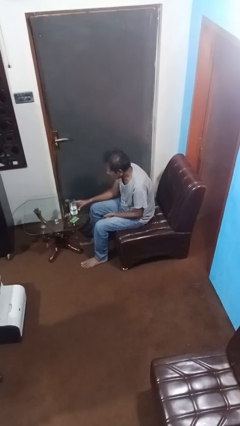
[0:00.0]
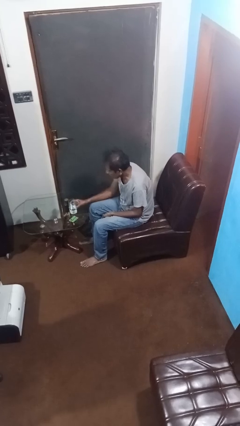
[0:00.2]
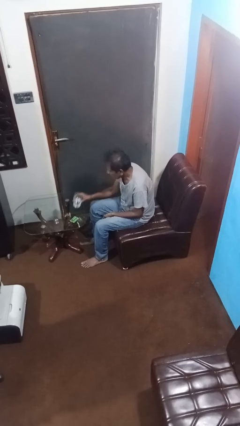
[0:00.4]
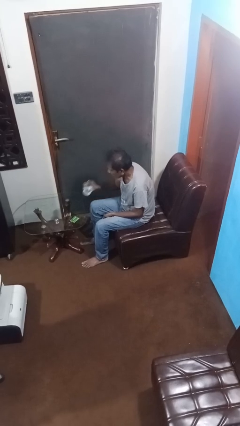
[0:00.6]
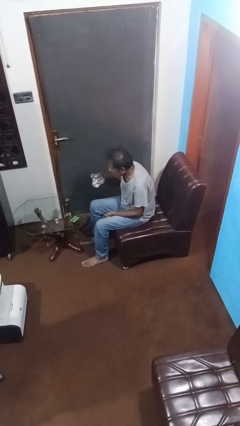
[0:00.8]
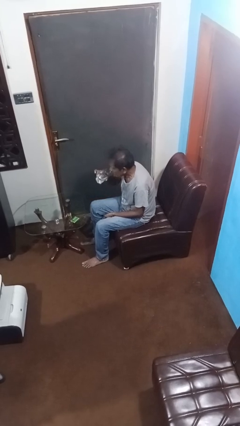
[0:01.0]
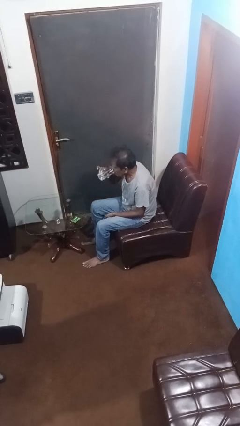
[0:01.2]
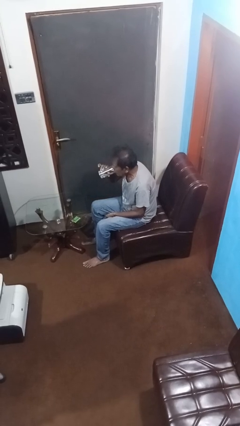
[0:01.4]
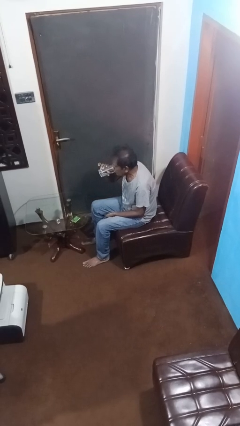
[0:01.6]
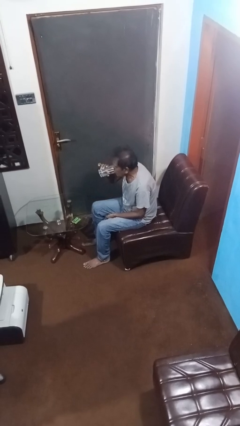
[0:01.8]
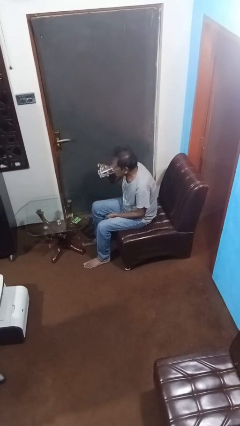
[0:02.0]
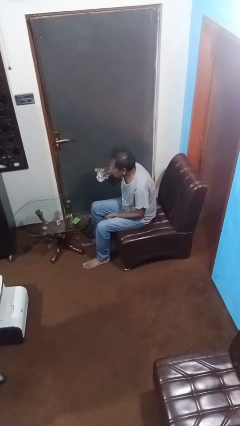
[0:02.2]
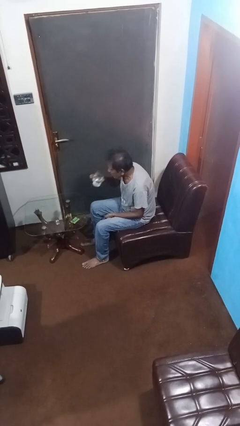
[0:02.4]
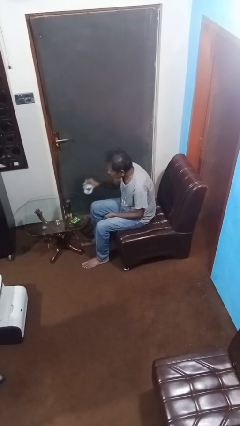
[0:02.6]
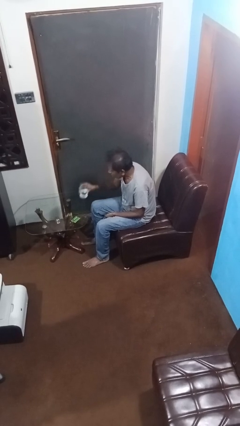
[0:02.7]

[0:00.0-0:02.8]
person drinks from cup

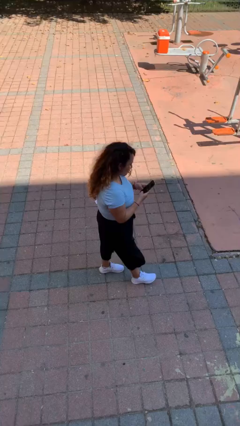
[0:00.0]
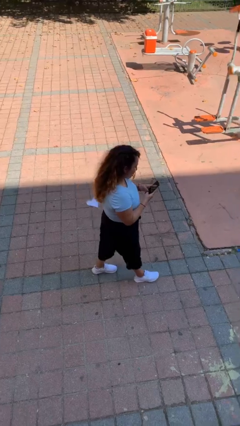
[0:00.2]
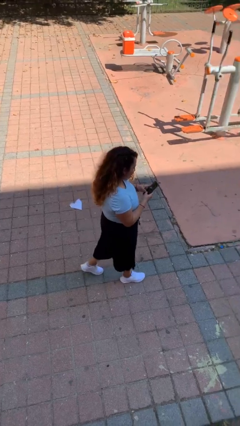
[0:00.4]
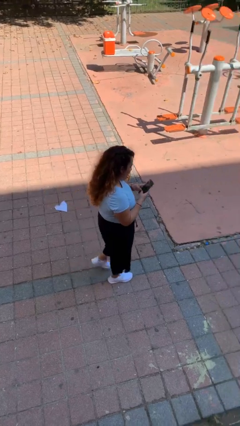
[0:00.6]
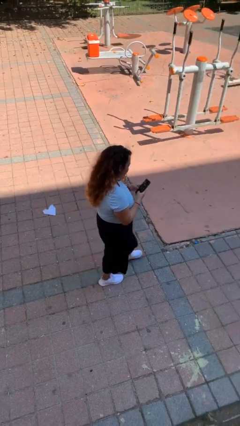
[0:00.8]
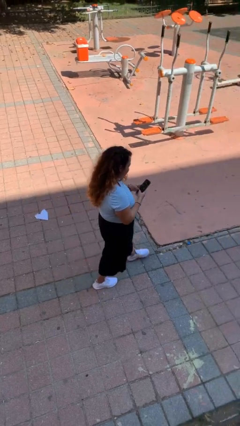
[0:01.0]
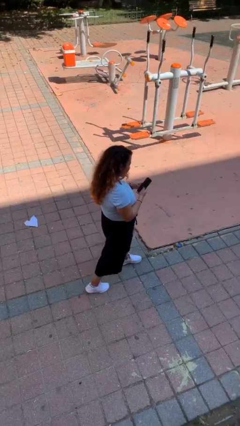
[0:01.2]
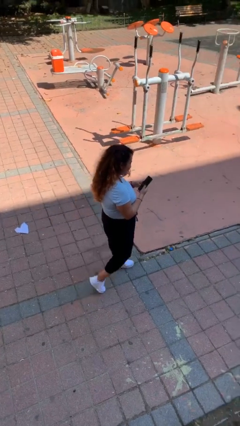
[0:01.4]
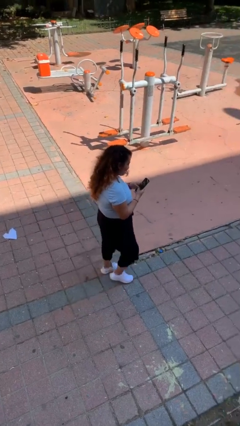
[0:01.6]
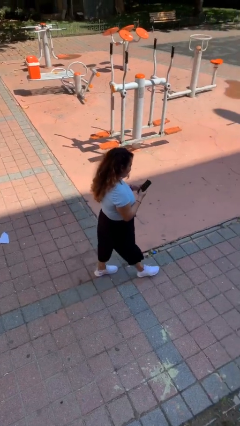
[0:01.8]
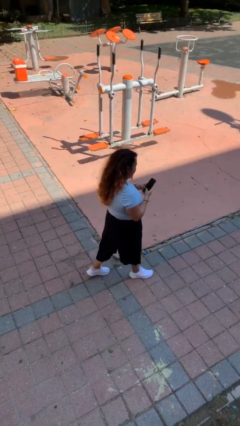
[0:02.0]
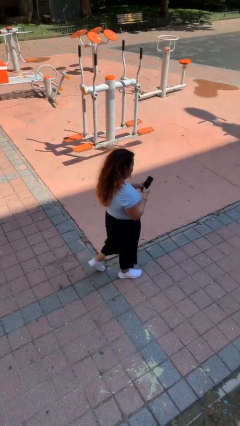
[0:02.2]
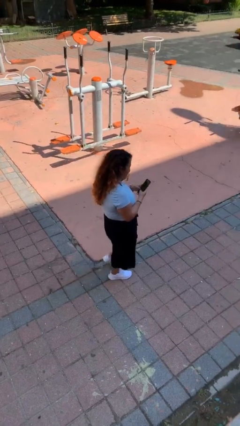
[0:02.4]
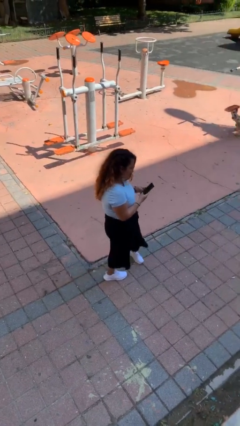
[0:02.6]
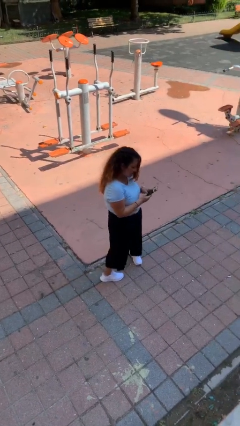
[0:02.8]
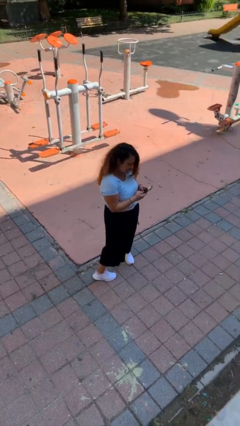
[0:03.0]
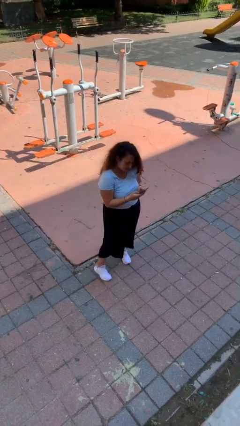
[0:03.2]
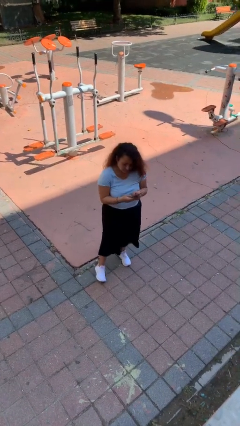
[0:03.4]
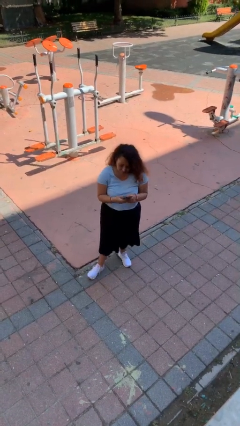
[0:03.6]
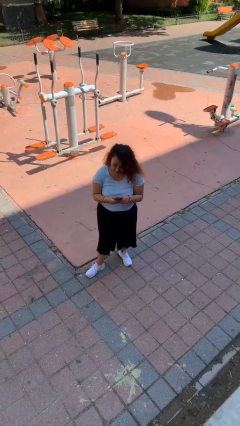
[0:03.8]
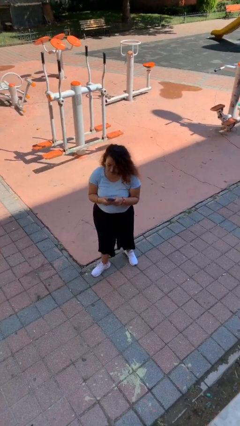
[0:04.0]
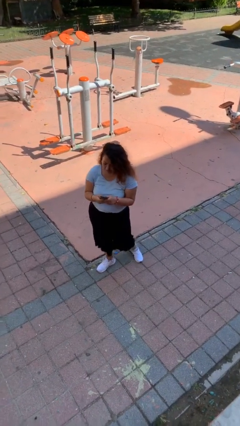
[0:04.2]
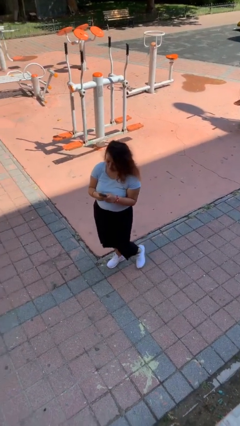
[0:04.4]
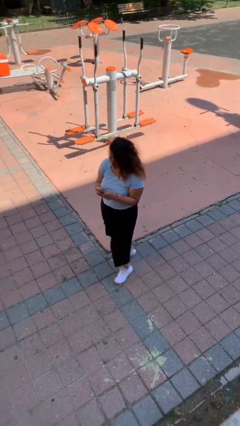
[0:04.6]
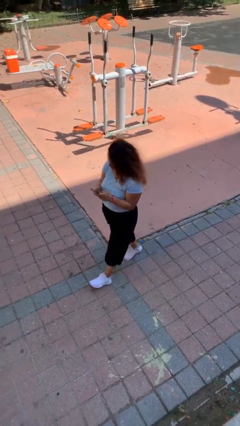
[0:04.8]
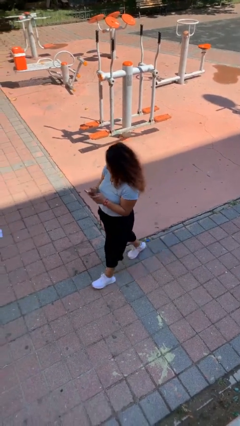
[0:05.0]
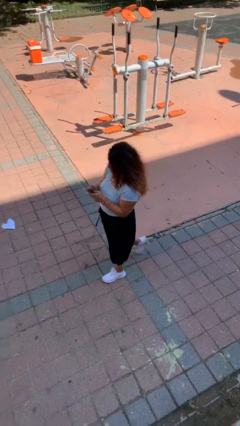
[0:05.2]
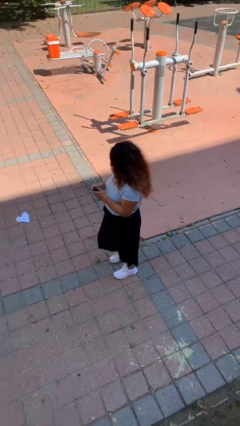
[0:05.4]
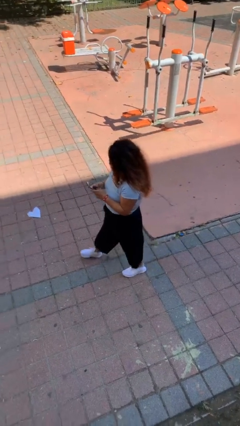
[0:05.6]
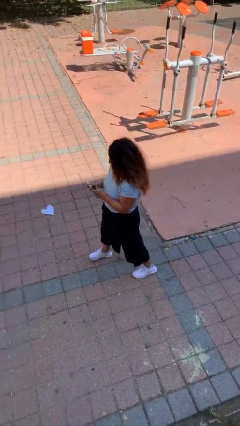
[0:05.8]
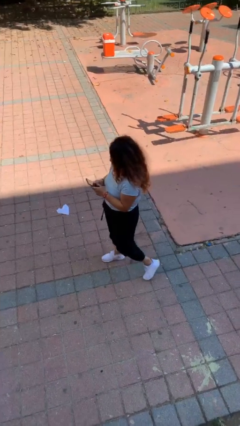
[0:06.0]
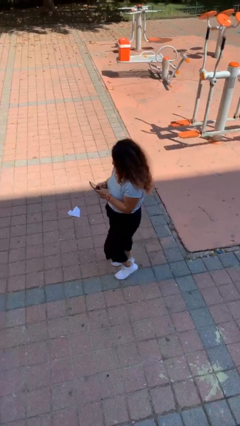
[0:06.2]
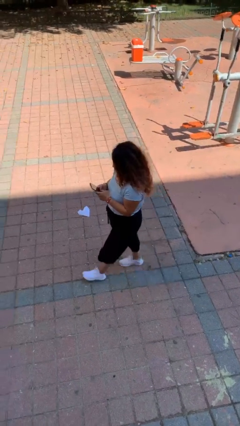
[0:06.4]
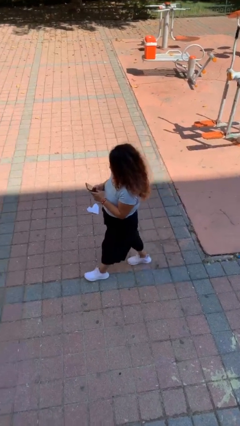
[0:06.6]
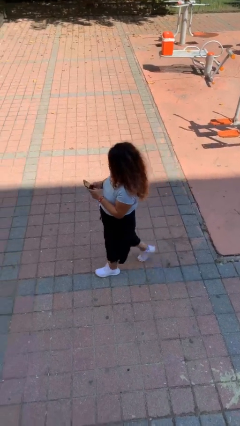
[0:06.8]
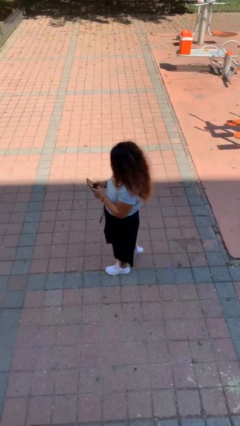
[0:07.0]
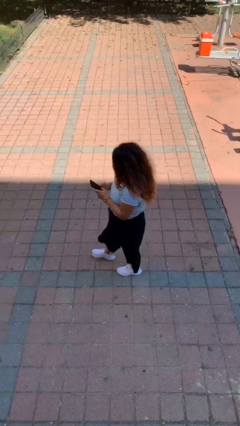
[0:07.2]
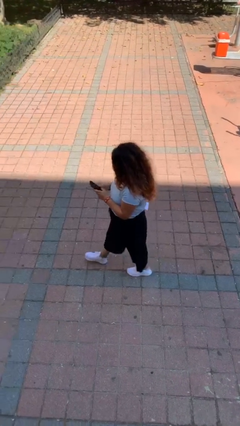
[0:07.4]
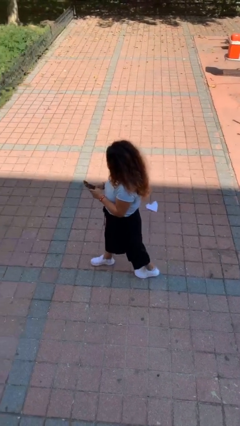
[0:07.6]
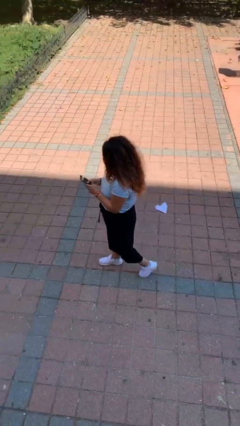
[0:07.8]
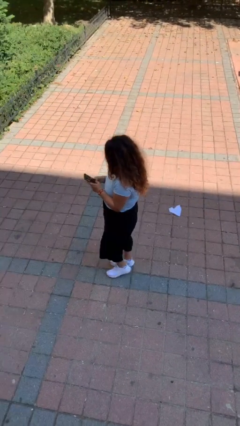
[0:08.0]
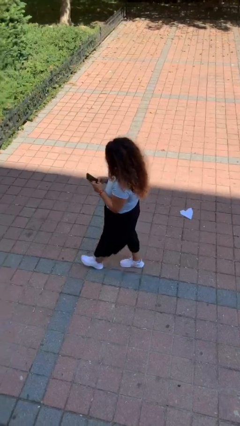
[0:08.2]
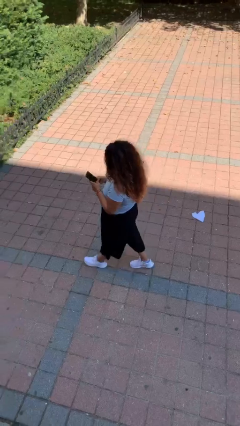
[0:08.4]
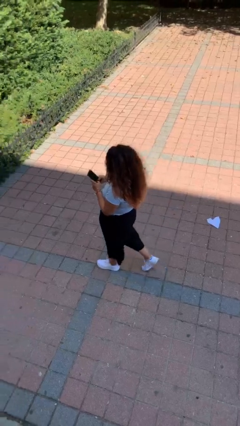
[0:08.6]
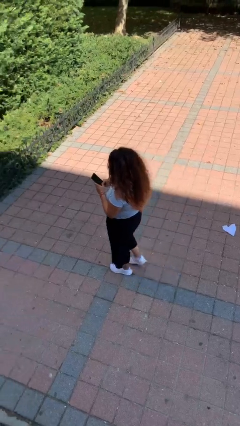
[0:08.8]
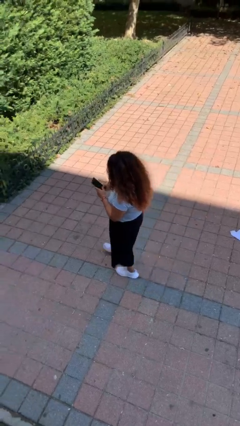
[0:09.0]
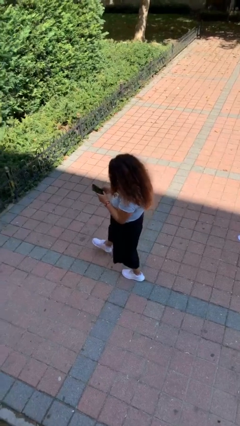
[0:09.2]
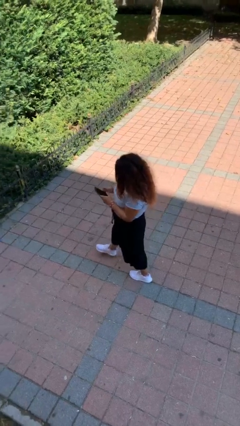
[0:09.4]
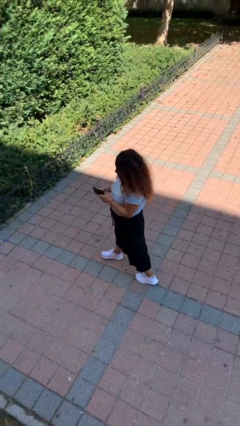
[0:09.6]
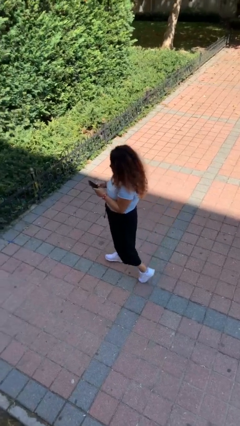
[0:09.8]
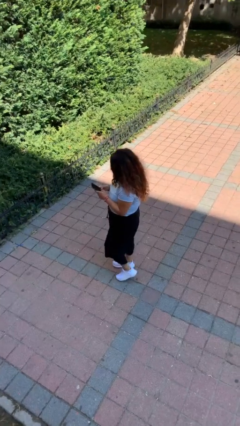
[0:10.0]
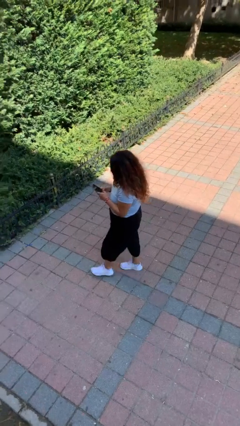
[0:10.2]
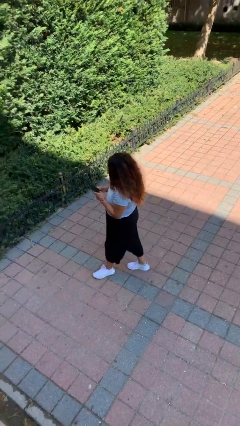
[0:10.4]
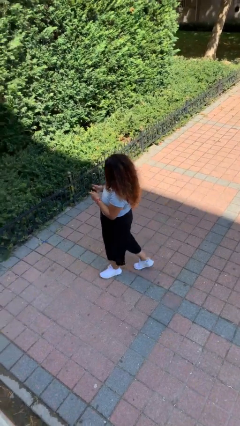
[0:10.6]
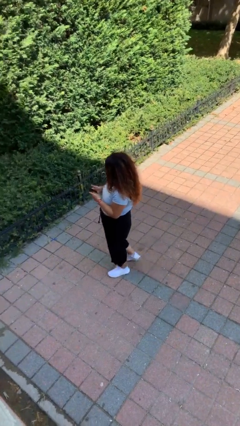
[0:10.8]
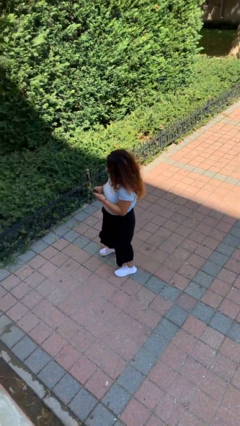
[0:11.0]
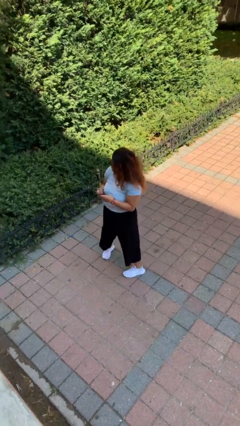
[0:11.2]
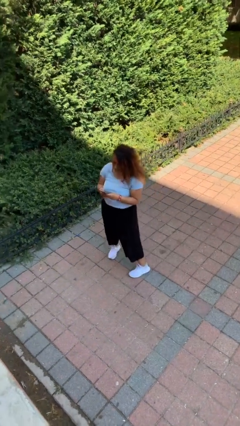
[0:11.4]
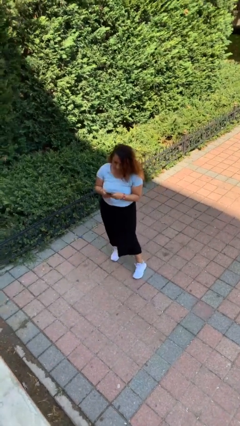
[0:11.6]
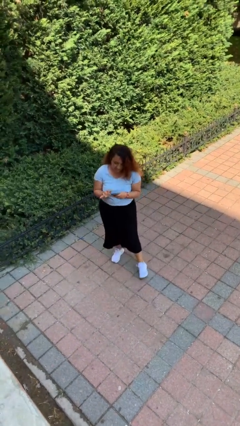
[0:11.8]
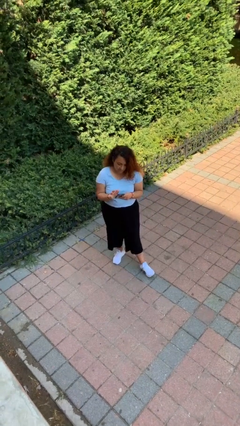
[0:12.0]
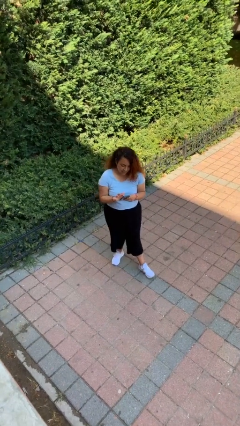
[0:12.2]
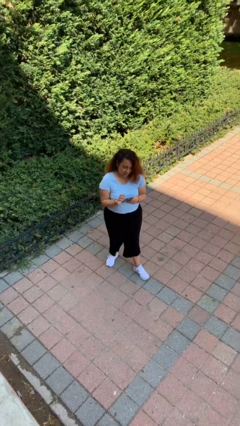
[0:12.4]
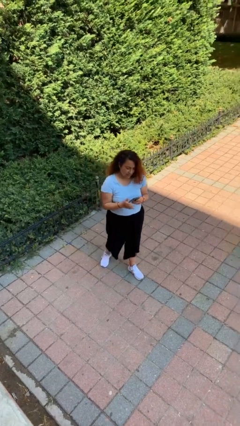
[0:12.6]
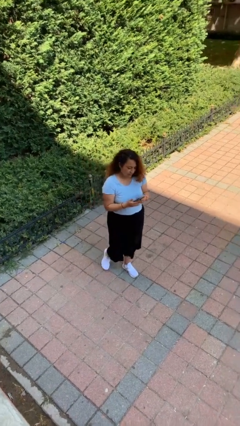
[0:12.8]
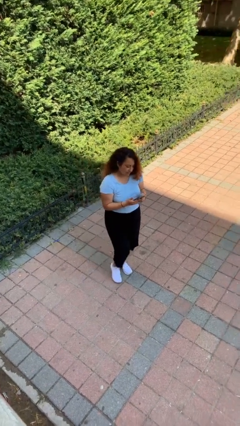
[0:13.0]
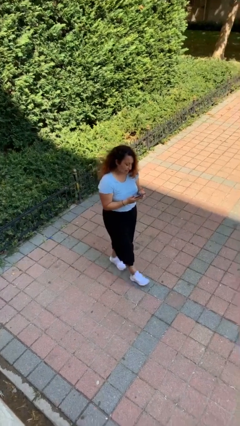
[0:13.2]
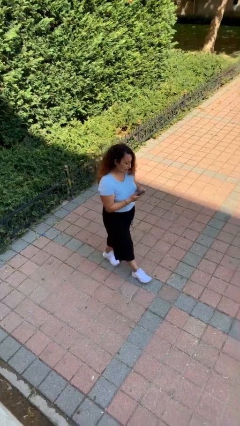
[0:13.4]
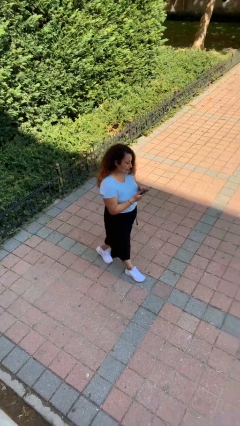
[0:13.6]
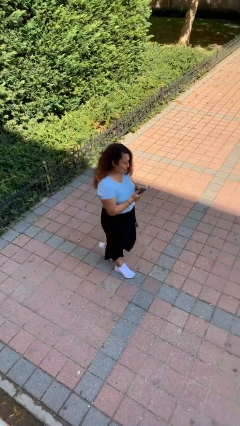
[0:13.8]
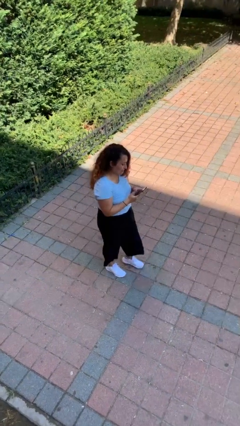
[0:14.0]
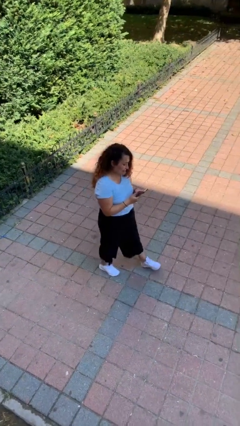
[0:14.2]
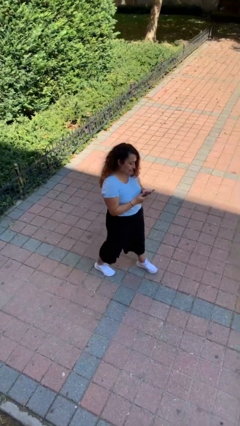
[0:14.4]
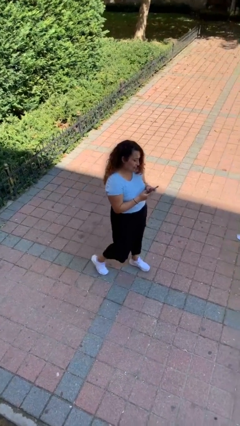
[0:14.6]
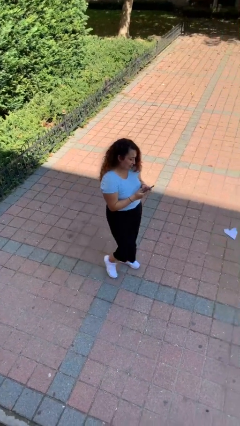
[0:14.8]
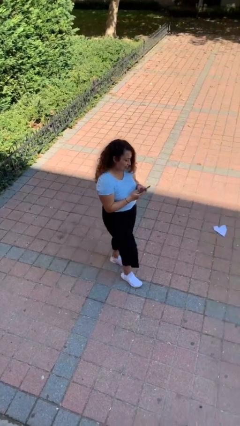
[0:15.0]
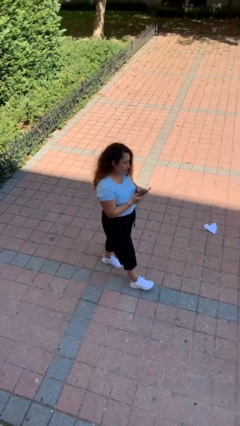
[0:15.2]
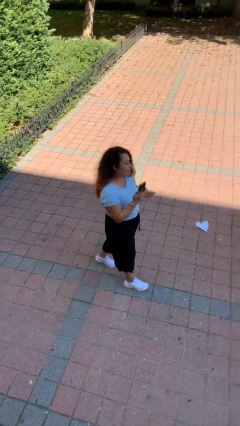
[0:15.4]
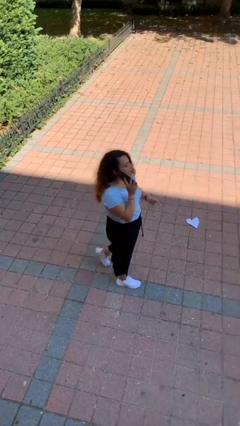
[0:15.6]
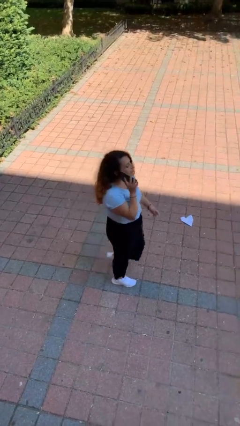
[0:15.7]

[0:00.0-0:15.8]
person texts on phone
